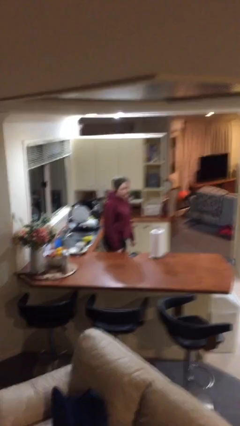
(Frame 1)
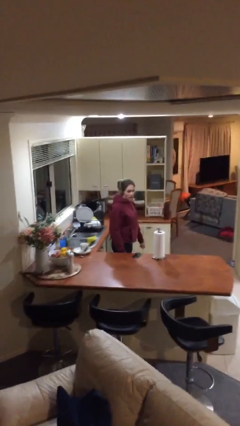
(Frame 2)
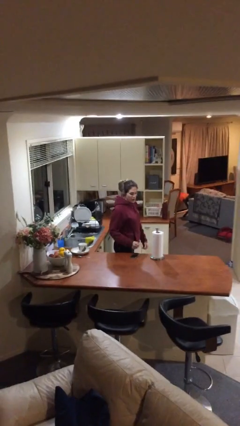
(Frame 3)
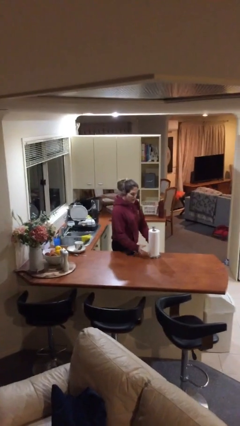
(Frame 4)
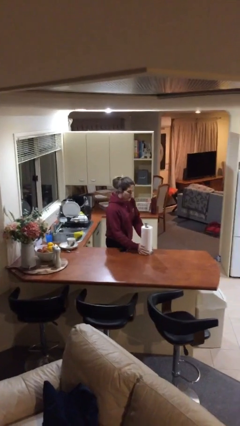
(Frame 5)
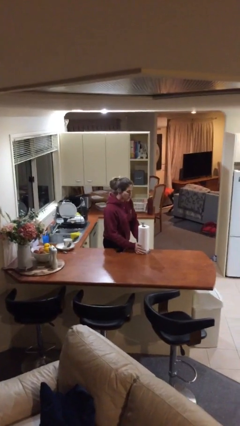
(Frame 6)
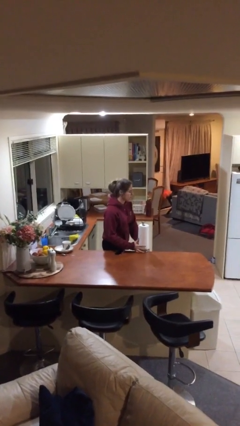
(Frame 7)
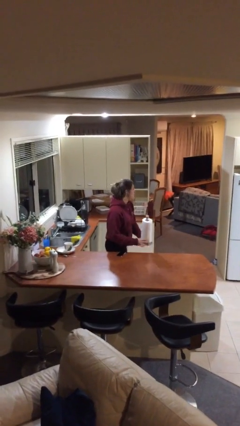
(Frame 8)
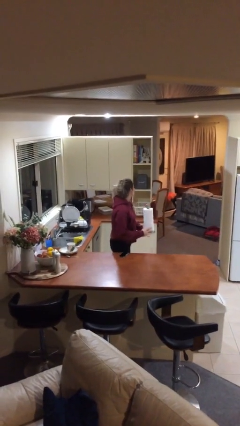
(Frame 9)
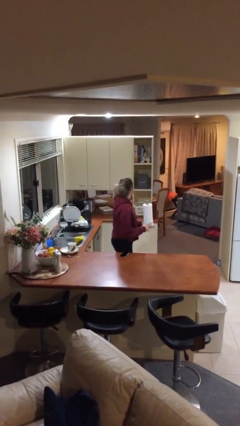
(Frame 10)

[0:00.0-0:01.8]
person picks up object from table

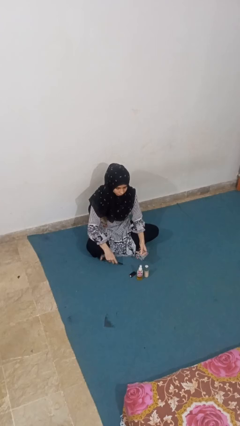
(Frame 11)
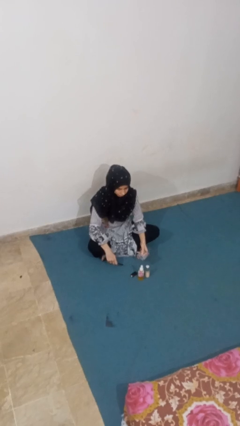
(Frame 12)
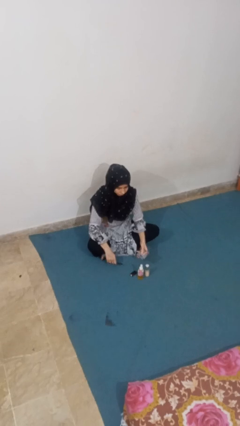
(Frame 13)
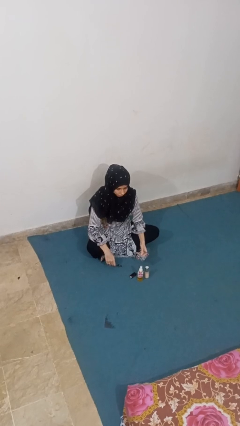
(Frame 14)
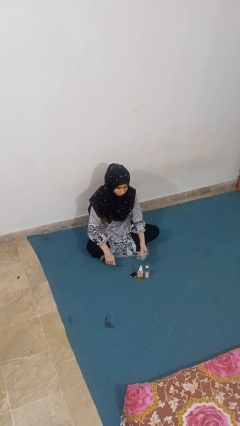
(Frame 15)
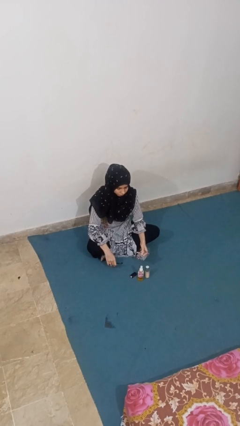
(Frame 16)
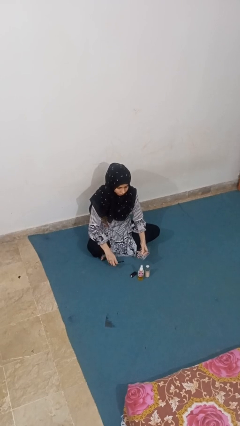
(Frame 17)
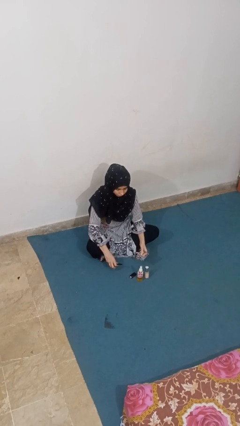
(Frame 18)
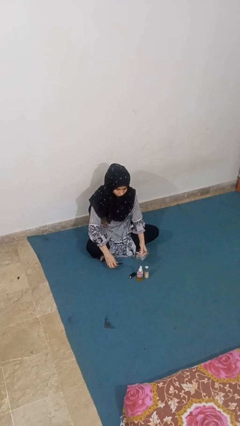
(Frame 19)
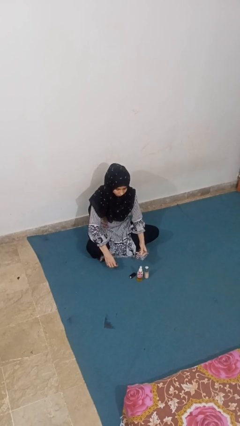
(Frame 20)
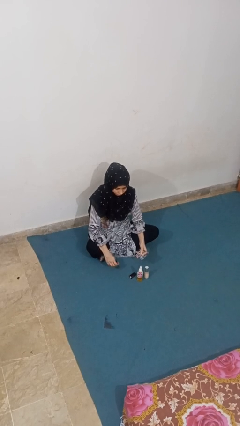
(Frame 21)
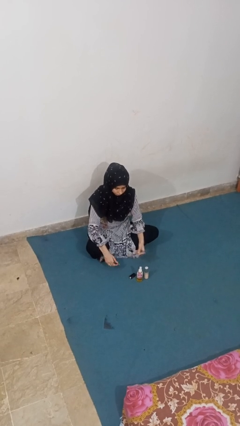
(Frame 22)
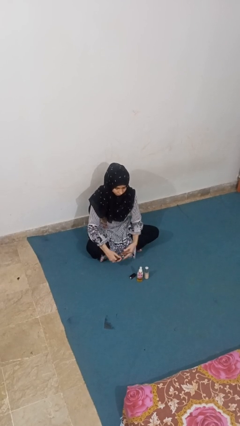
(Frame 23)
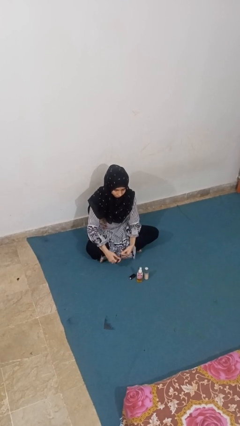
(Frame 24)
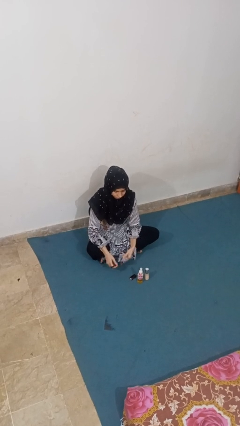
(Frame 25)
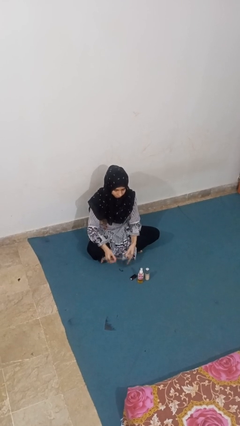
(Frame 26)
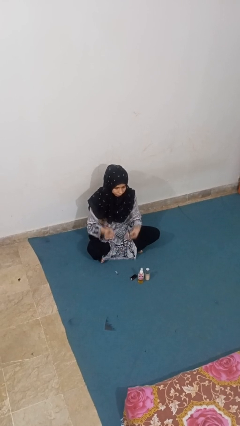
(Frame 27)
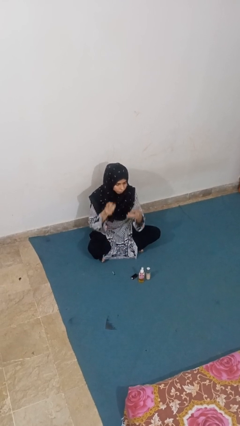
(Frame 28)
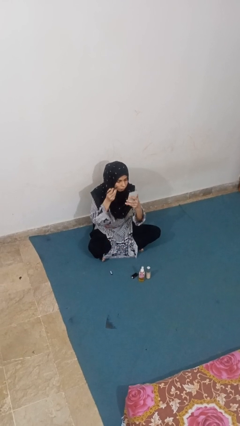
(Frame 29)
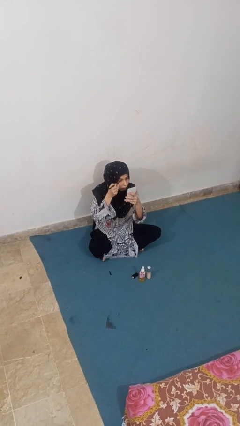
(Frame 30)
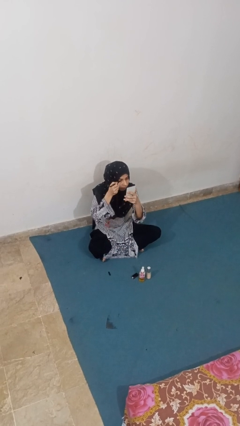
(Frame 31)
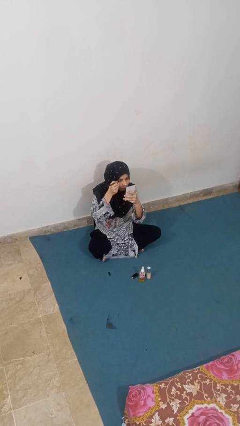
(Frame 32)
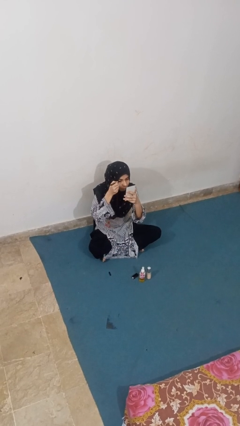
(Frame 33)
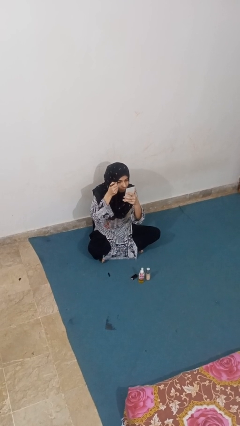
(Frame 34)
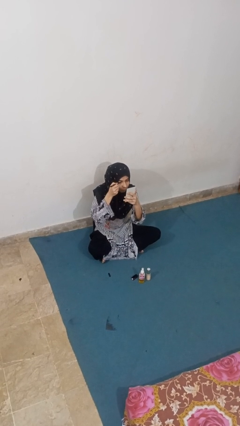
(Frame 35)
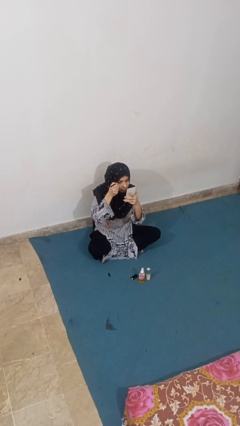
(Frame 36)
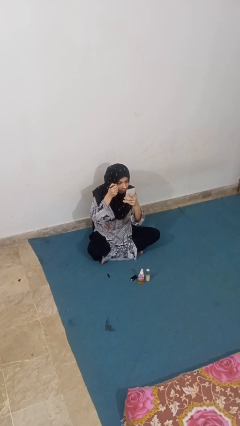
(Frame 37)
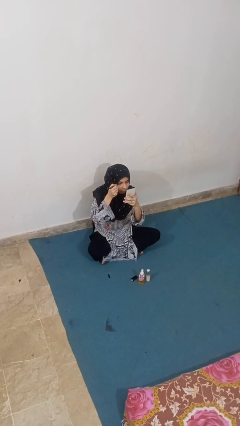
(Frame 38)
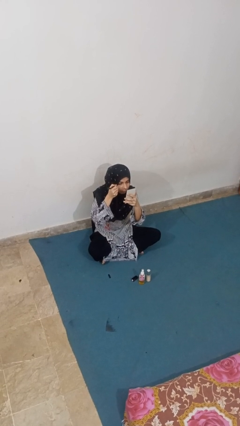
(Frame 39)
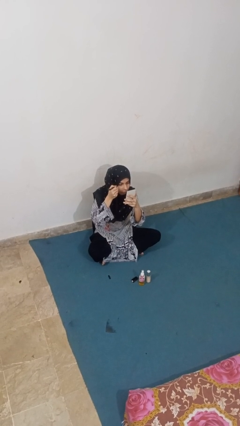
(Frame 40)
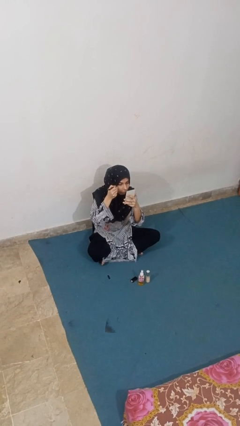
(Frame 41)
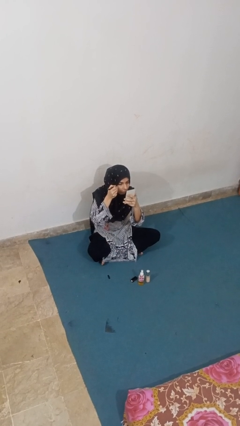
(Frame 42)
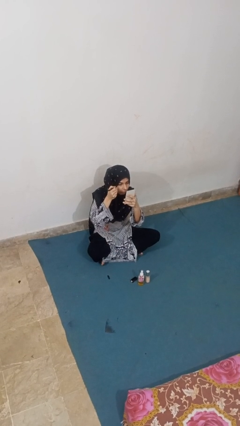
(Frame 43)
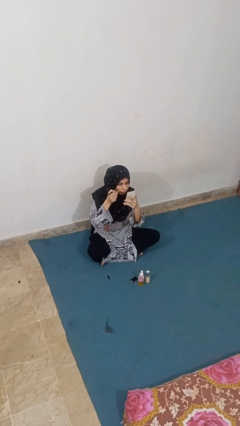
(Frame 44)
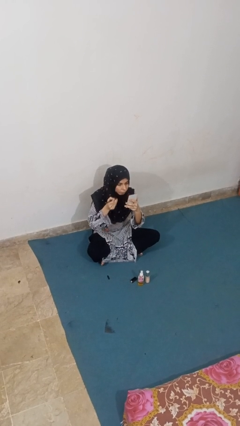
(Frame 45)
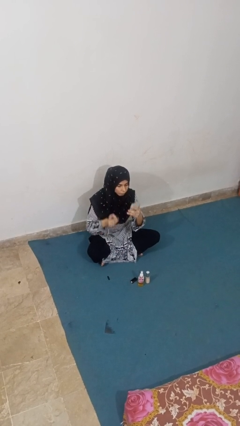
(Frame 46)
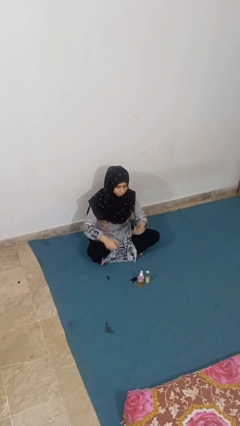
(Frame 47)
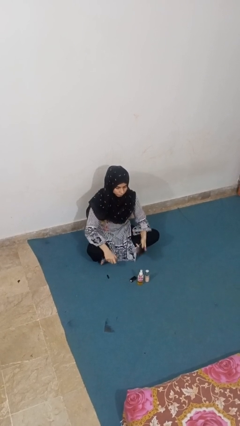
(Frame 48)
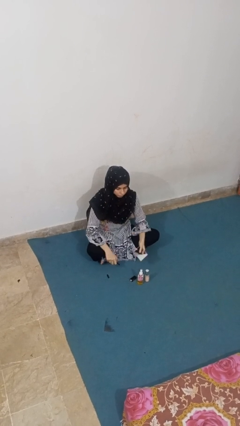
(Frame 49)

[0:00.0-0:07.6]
person applies eye makeup

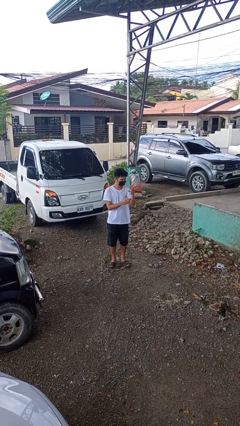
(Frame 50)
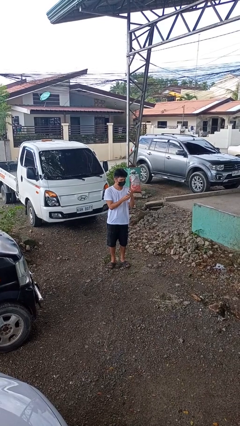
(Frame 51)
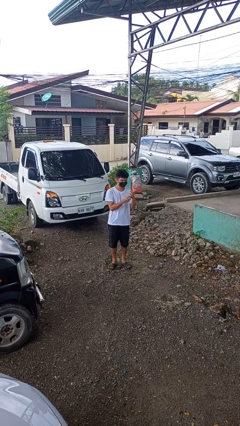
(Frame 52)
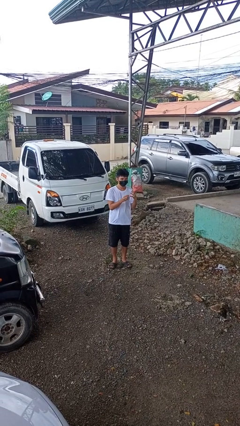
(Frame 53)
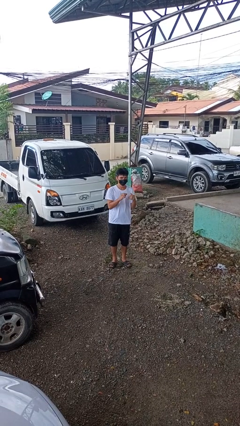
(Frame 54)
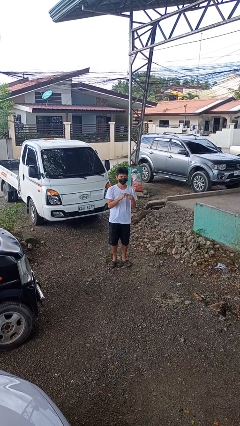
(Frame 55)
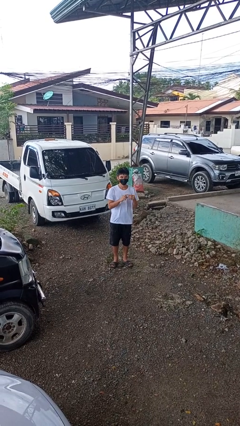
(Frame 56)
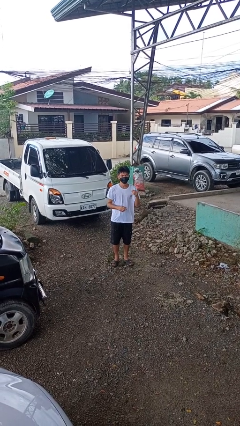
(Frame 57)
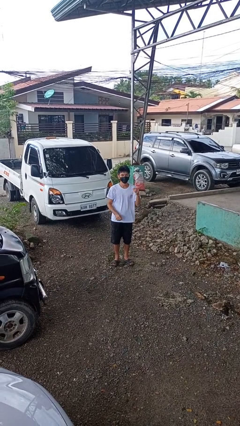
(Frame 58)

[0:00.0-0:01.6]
person takes off ring

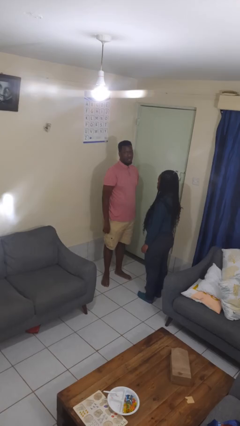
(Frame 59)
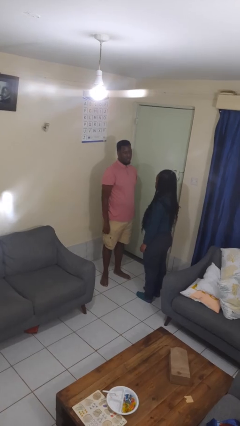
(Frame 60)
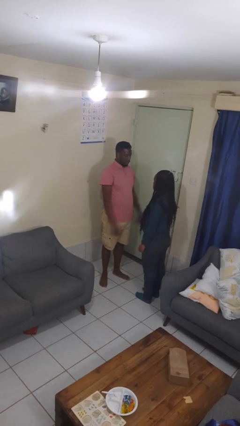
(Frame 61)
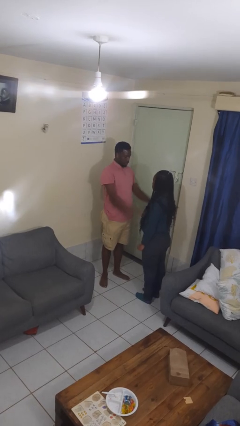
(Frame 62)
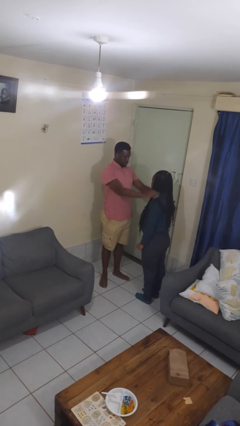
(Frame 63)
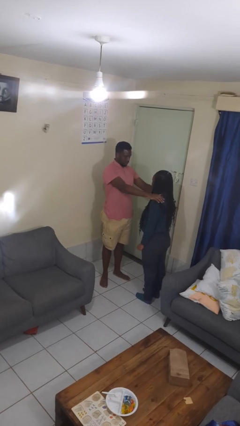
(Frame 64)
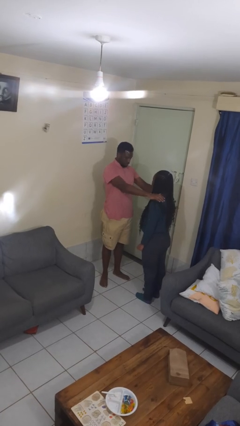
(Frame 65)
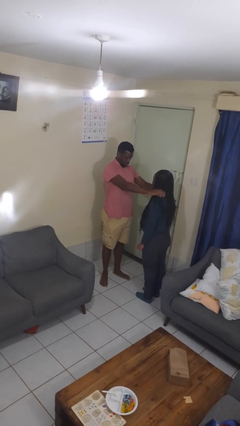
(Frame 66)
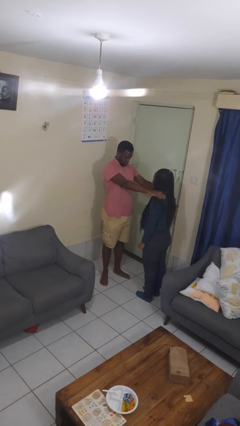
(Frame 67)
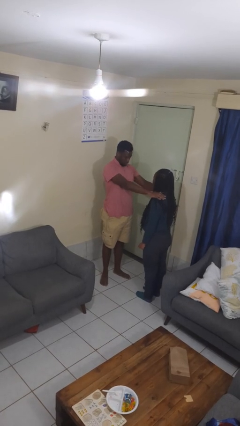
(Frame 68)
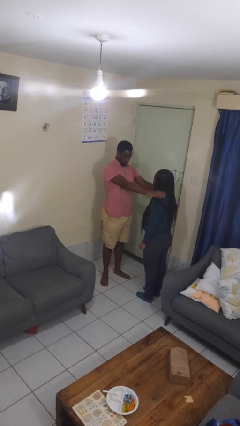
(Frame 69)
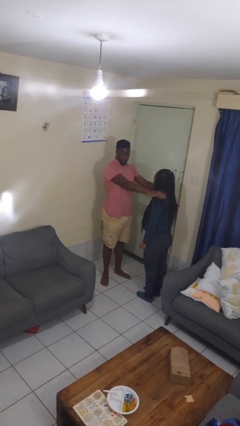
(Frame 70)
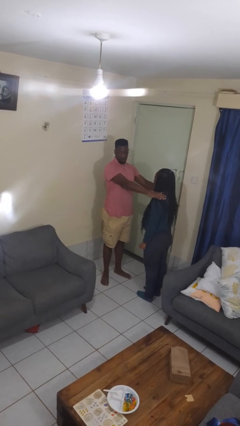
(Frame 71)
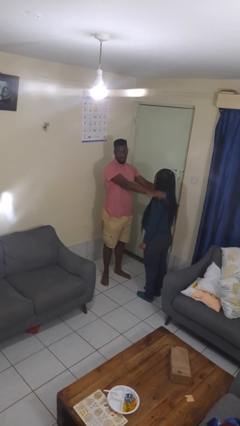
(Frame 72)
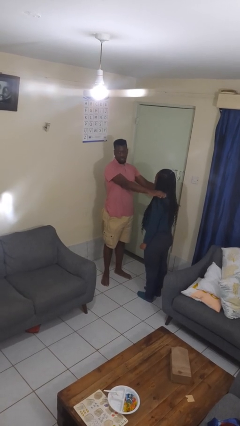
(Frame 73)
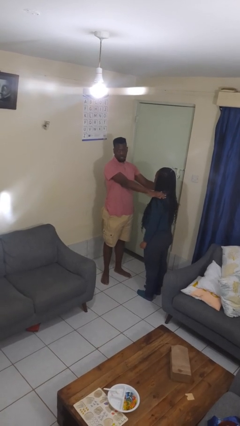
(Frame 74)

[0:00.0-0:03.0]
person pounds shoulders of person

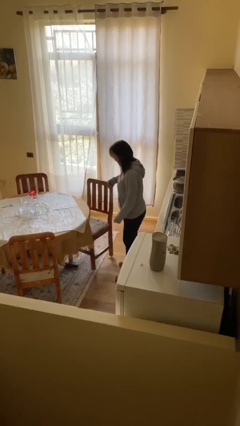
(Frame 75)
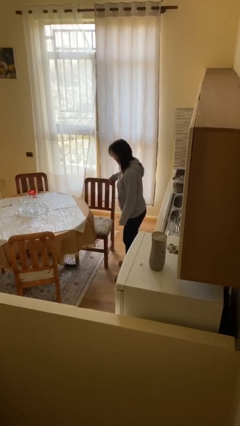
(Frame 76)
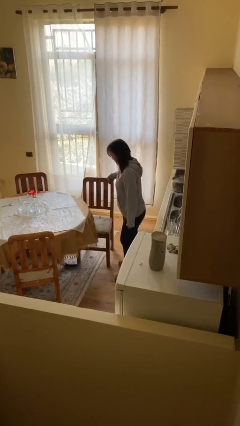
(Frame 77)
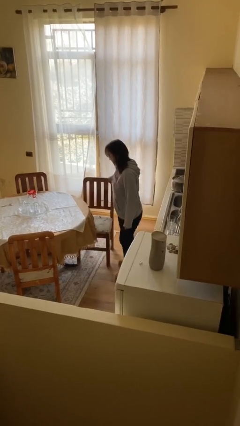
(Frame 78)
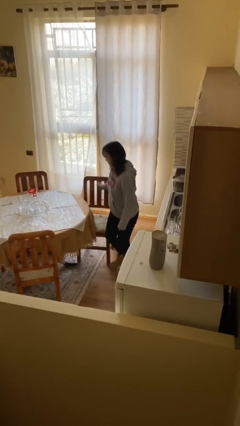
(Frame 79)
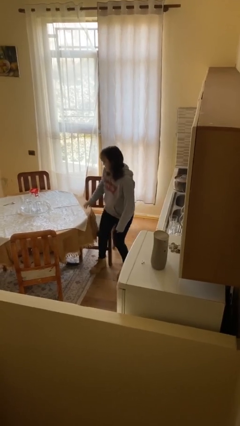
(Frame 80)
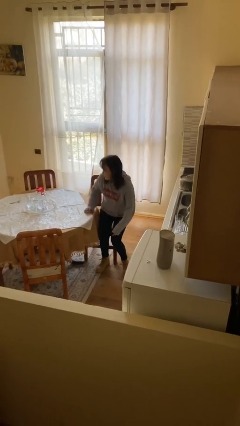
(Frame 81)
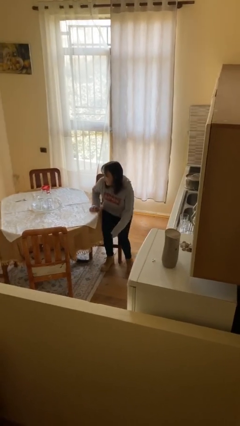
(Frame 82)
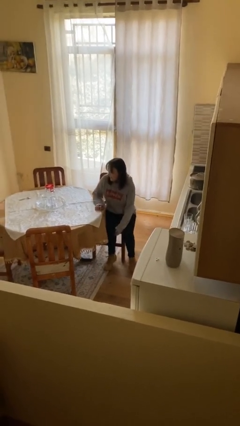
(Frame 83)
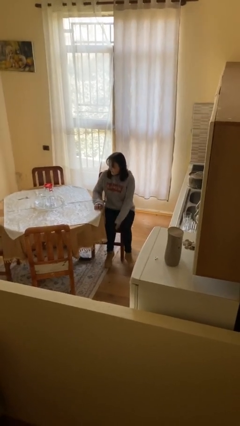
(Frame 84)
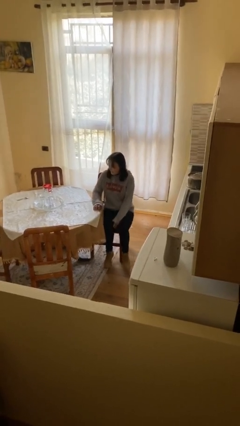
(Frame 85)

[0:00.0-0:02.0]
person sits down

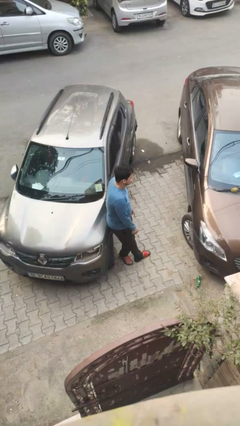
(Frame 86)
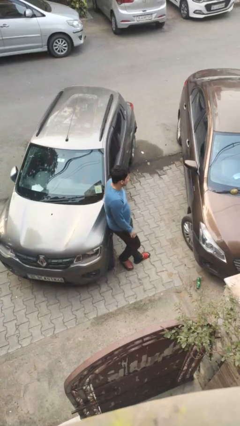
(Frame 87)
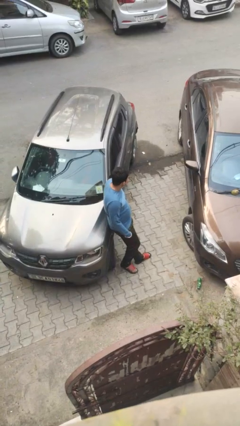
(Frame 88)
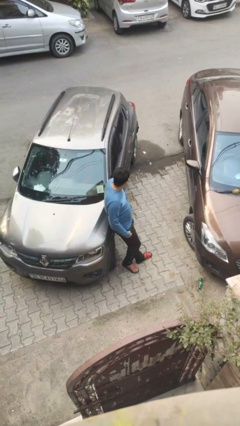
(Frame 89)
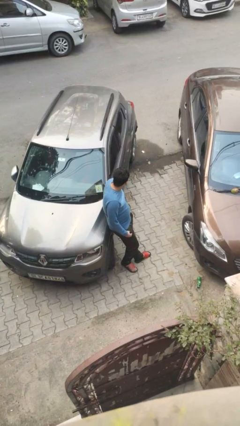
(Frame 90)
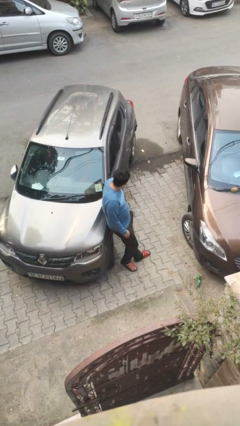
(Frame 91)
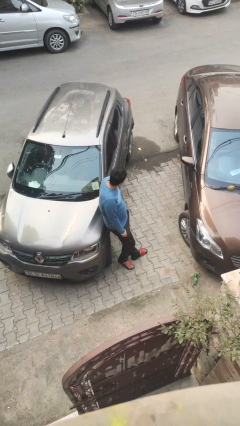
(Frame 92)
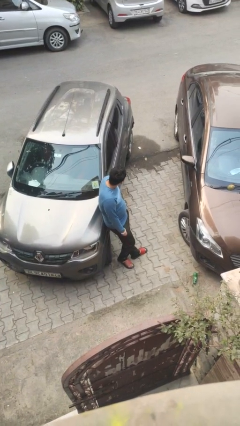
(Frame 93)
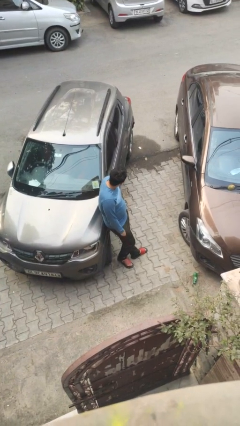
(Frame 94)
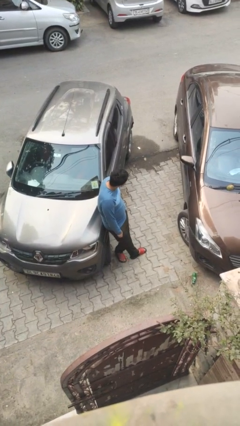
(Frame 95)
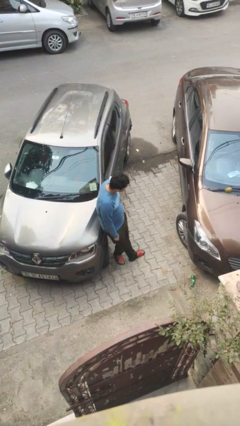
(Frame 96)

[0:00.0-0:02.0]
person leans against car
